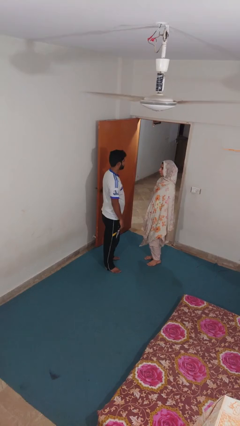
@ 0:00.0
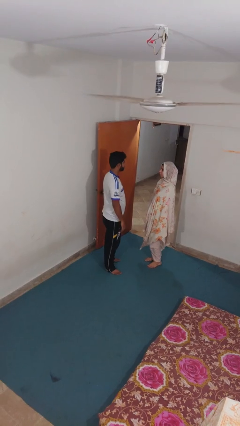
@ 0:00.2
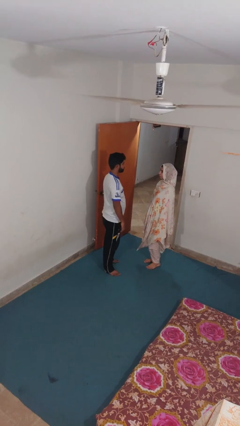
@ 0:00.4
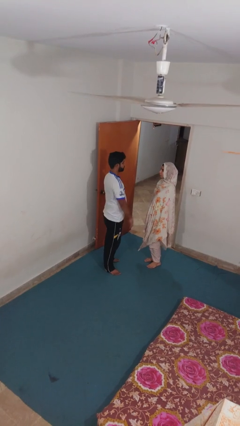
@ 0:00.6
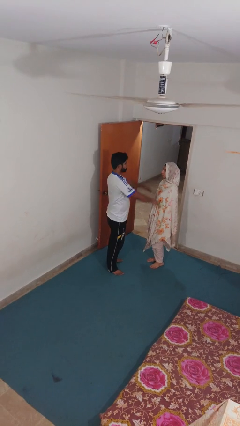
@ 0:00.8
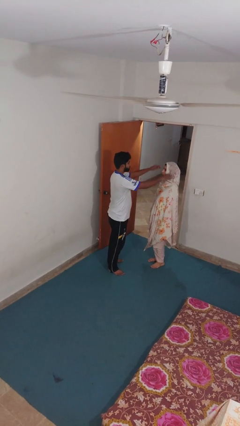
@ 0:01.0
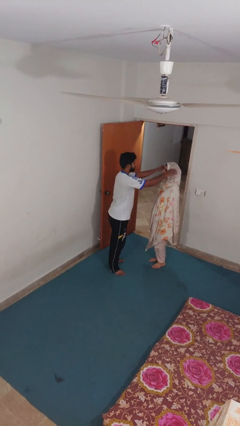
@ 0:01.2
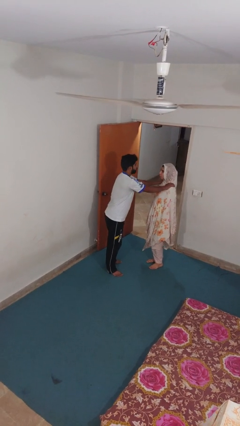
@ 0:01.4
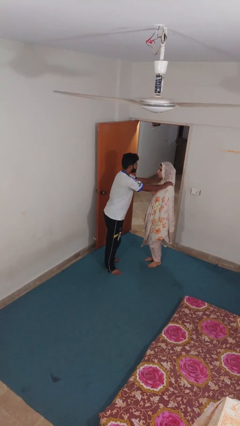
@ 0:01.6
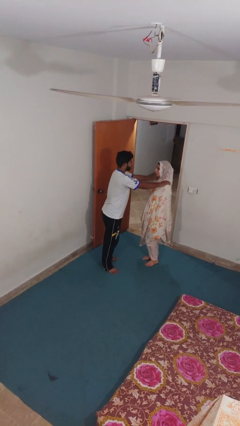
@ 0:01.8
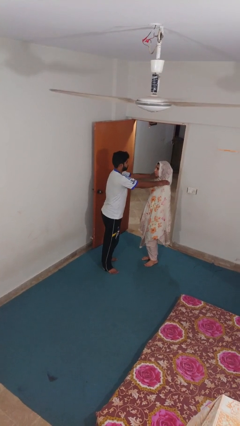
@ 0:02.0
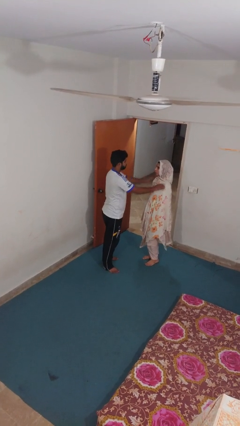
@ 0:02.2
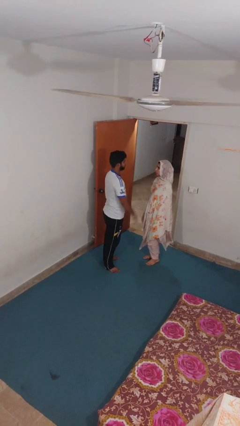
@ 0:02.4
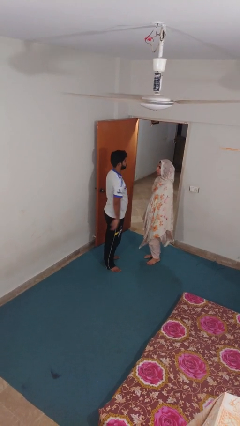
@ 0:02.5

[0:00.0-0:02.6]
person pounds shoulders of person

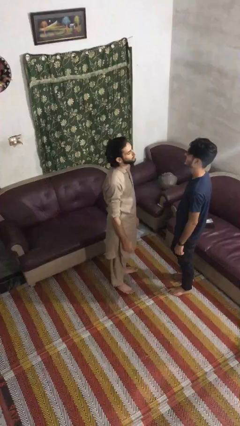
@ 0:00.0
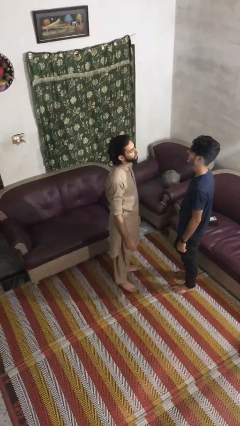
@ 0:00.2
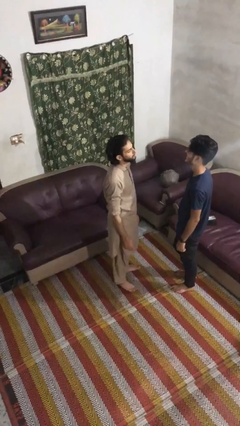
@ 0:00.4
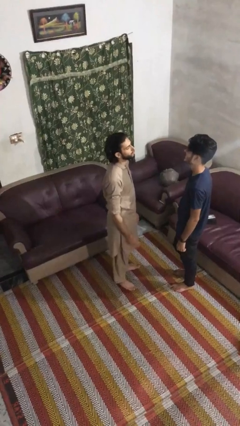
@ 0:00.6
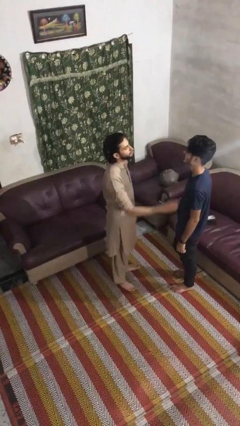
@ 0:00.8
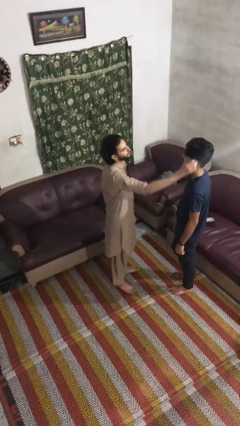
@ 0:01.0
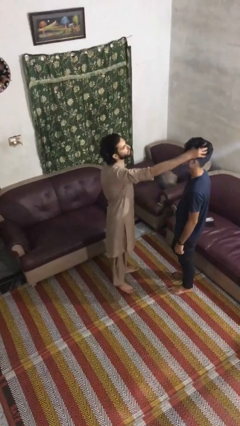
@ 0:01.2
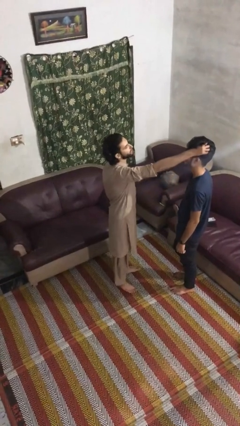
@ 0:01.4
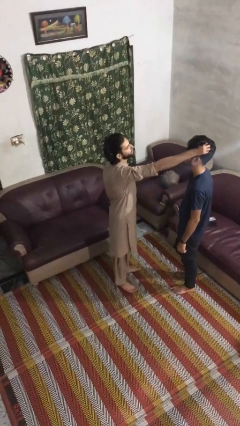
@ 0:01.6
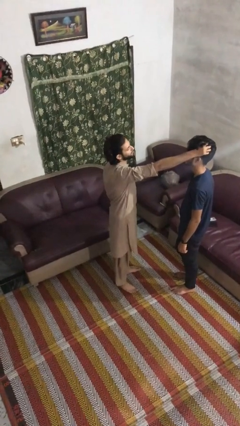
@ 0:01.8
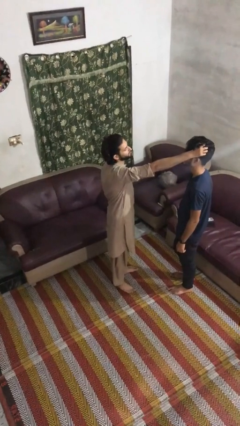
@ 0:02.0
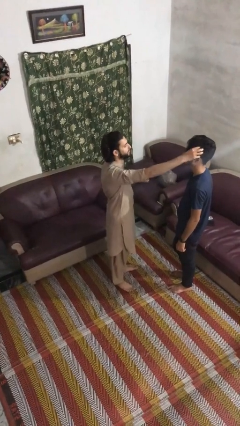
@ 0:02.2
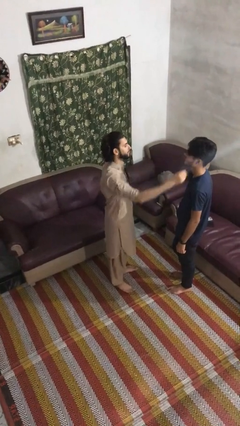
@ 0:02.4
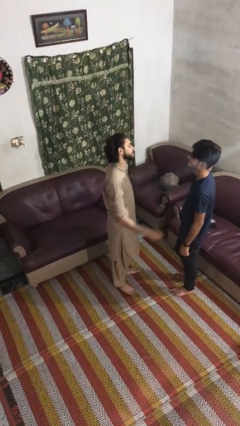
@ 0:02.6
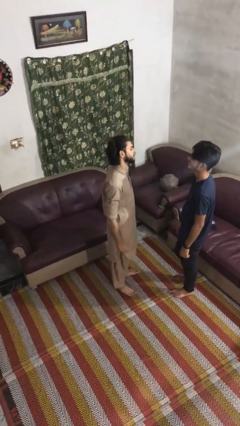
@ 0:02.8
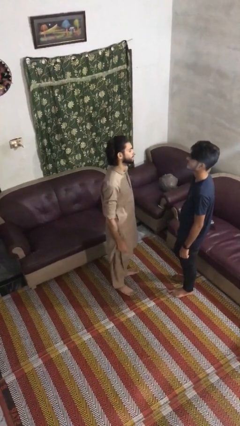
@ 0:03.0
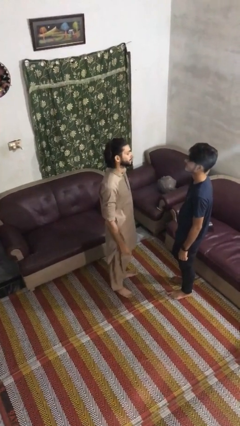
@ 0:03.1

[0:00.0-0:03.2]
person grabs person by hair

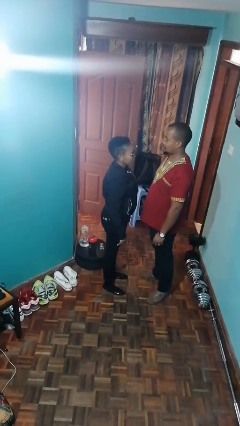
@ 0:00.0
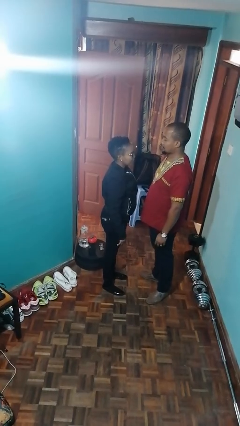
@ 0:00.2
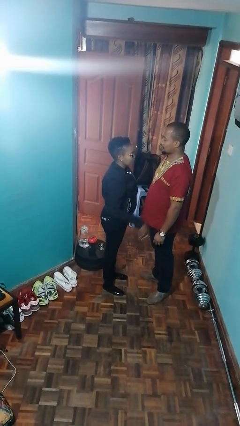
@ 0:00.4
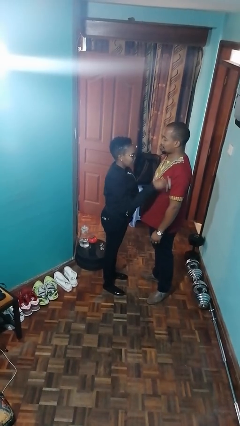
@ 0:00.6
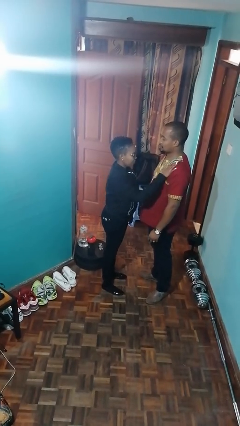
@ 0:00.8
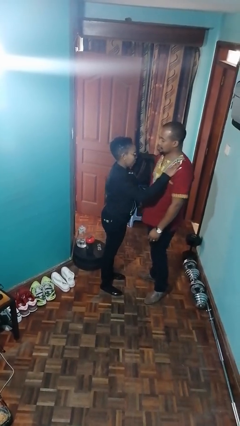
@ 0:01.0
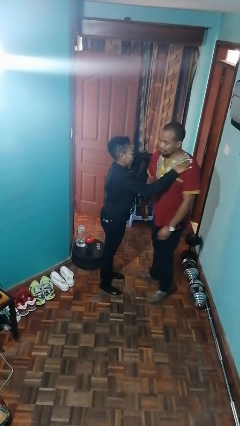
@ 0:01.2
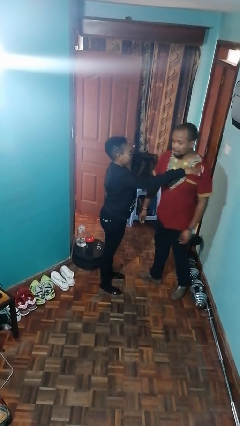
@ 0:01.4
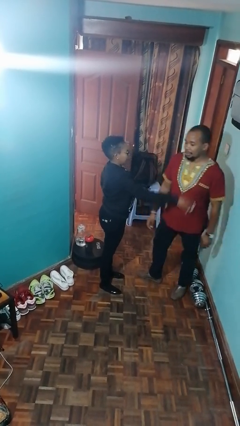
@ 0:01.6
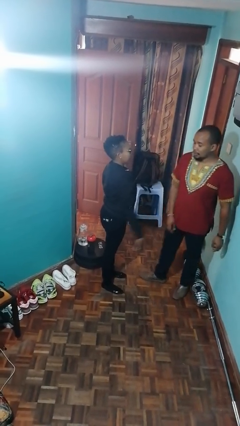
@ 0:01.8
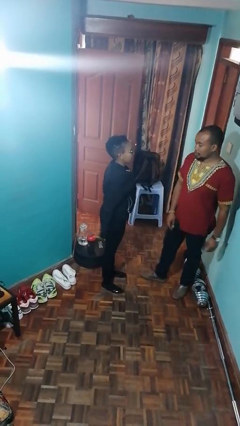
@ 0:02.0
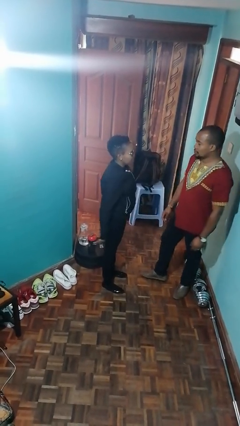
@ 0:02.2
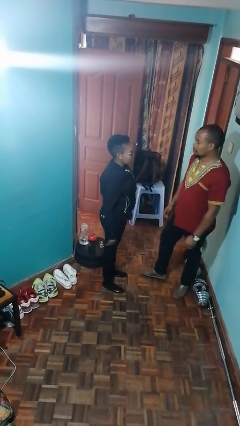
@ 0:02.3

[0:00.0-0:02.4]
person shoves person

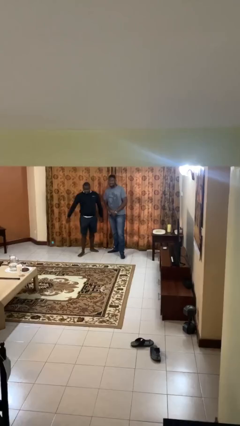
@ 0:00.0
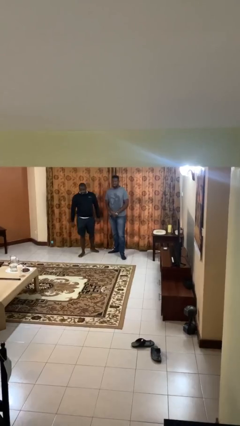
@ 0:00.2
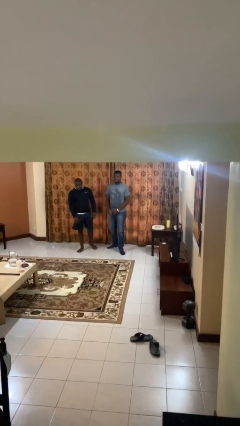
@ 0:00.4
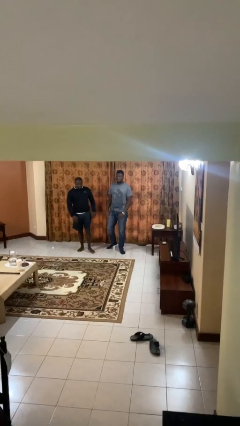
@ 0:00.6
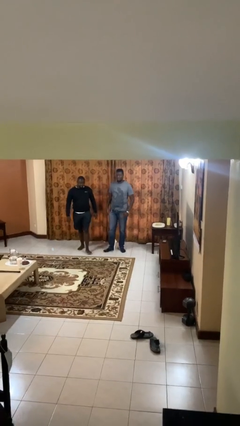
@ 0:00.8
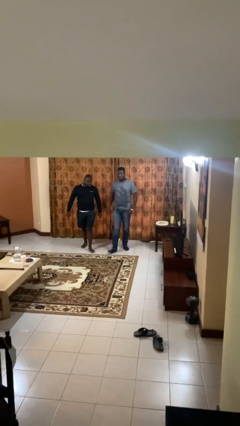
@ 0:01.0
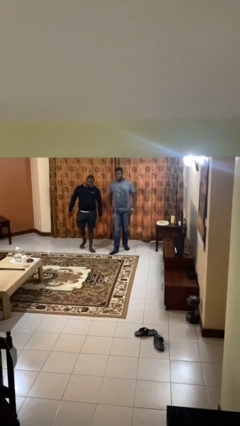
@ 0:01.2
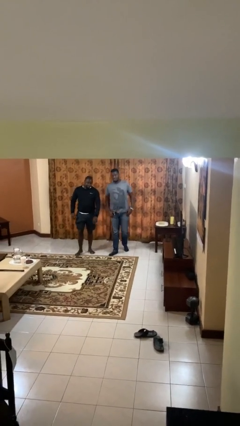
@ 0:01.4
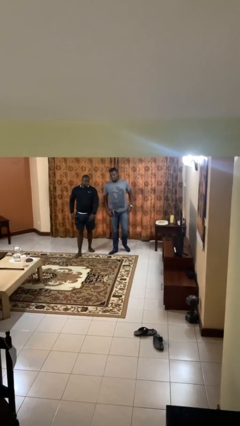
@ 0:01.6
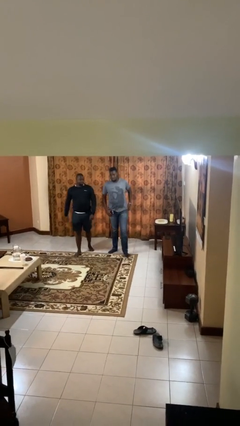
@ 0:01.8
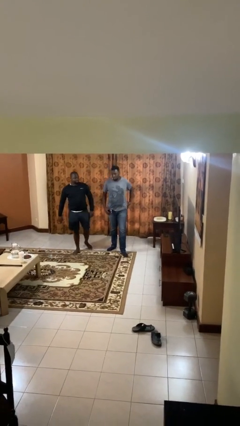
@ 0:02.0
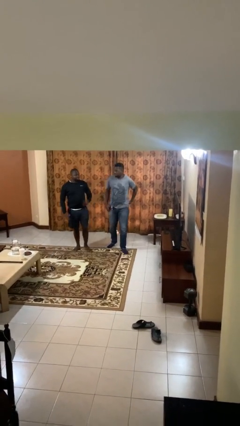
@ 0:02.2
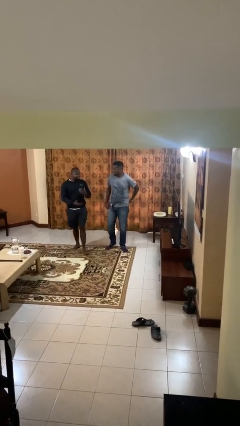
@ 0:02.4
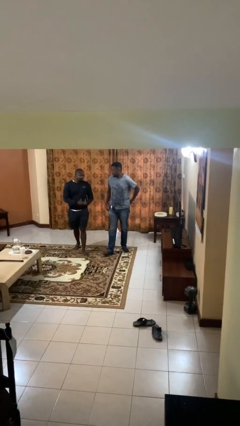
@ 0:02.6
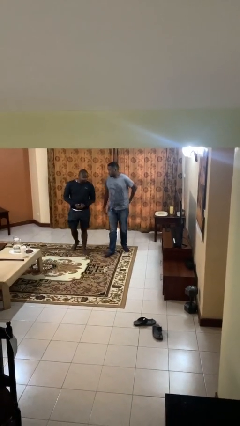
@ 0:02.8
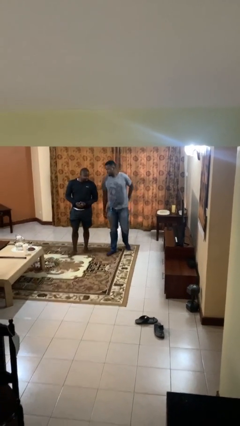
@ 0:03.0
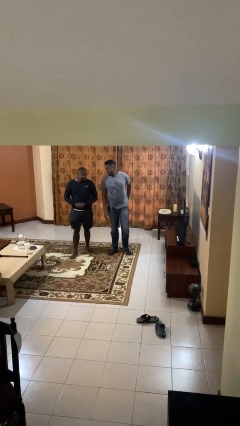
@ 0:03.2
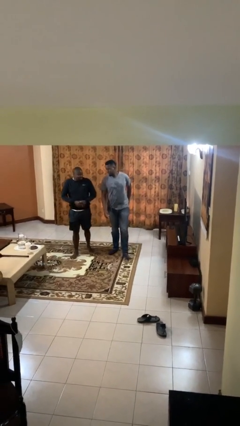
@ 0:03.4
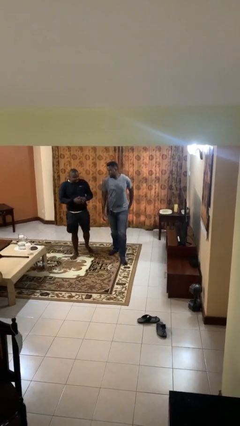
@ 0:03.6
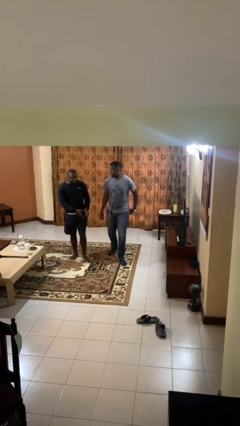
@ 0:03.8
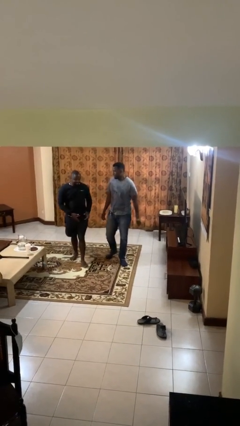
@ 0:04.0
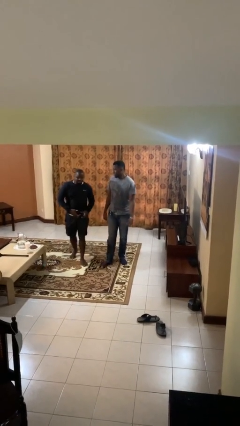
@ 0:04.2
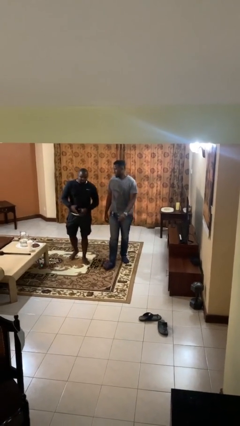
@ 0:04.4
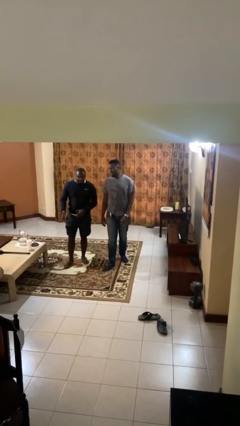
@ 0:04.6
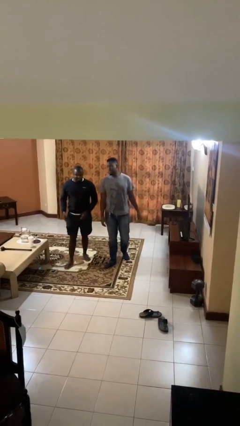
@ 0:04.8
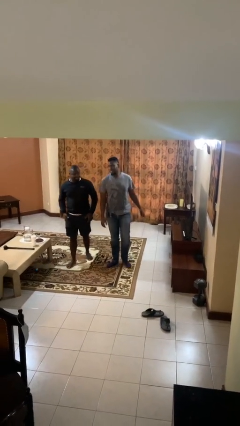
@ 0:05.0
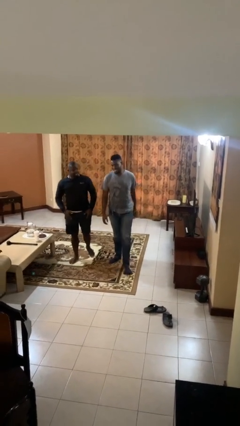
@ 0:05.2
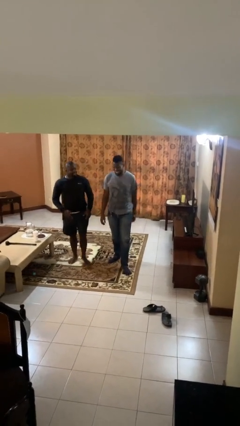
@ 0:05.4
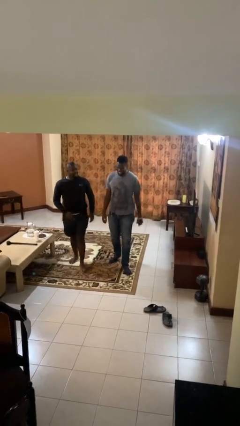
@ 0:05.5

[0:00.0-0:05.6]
person talks to person

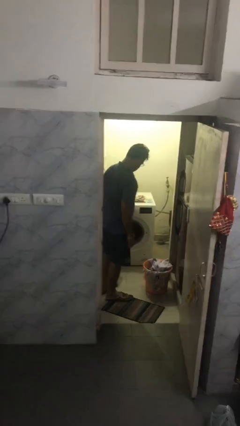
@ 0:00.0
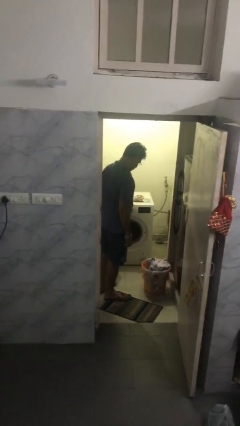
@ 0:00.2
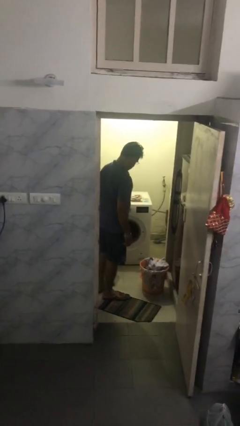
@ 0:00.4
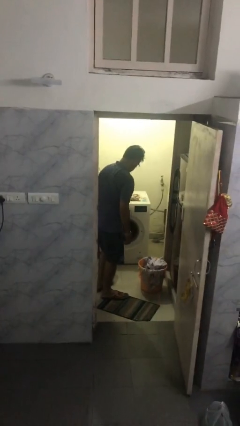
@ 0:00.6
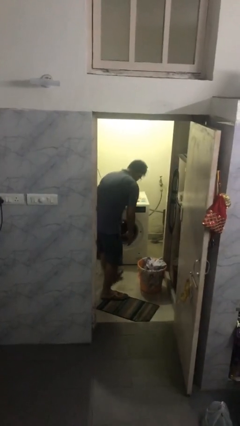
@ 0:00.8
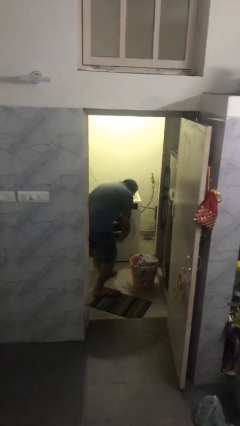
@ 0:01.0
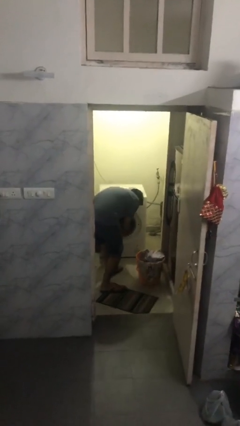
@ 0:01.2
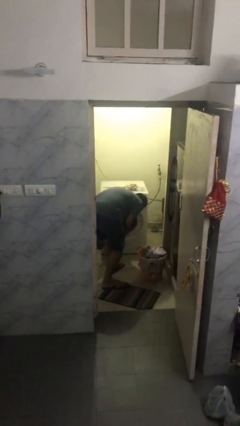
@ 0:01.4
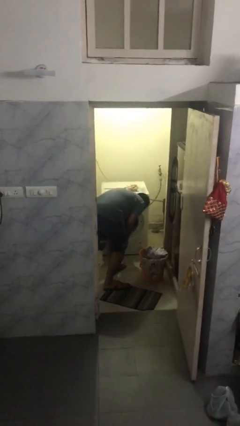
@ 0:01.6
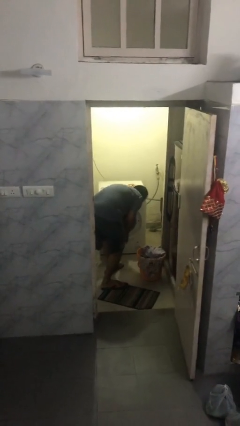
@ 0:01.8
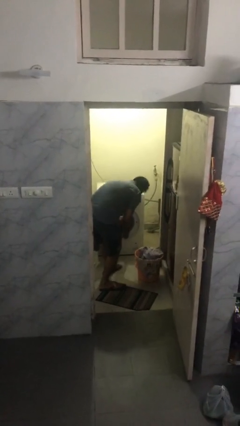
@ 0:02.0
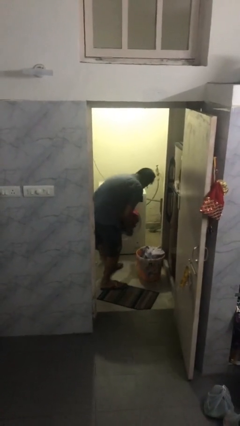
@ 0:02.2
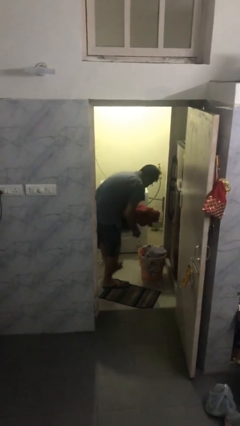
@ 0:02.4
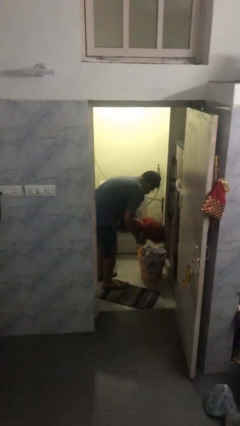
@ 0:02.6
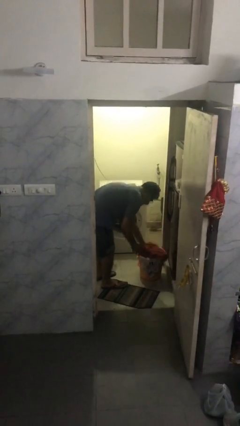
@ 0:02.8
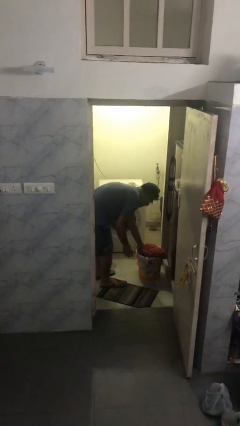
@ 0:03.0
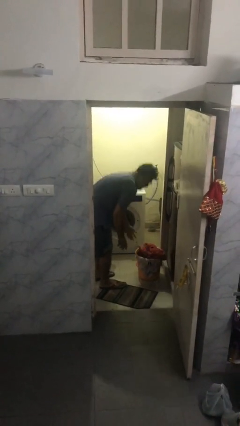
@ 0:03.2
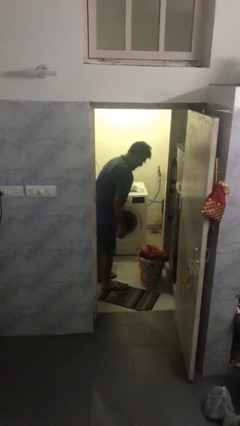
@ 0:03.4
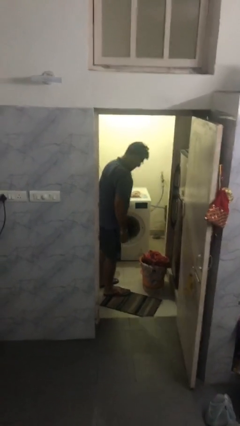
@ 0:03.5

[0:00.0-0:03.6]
person unloads dryer

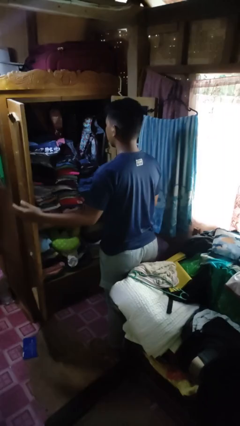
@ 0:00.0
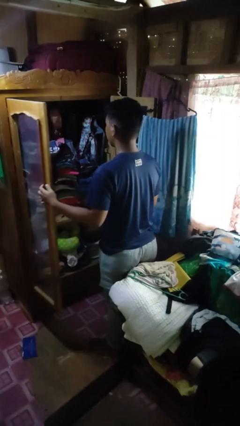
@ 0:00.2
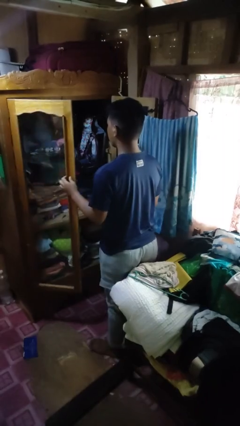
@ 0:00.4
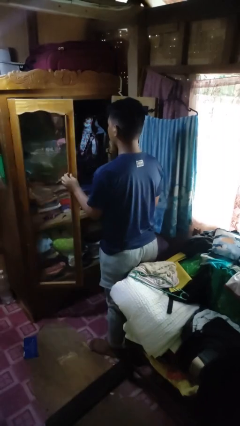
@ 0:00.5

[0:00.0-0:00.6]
person closes closet door
